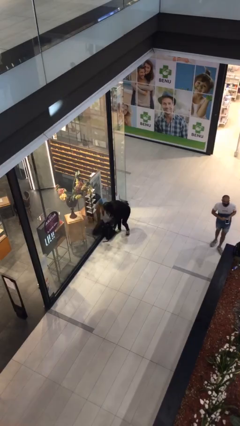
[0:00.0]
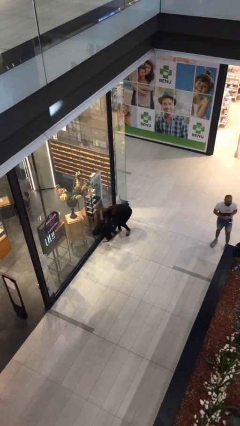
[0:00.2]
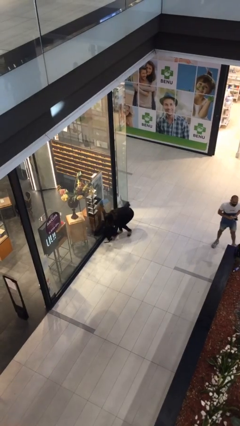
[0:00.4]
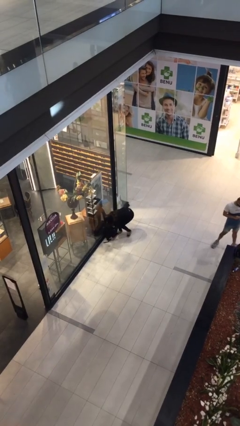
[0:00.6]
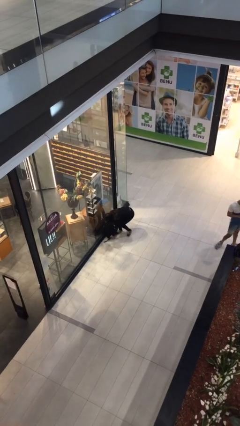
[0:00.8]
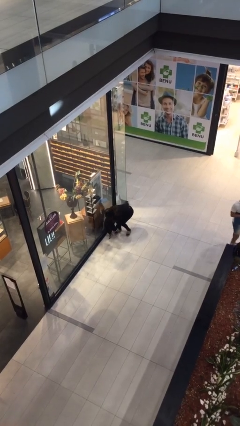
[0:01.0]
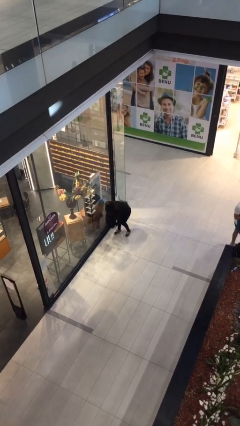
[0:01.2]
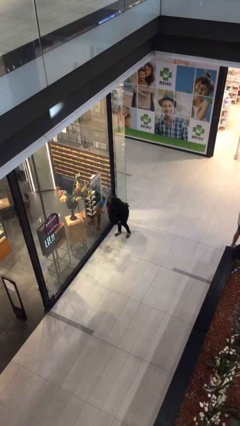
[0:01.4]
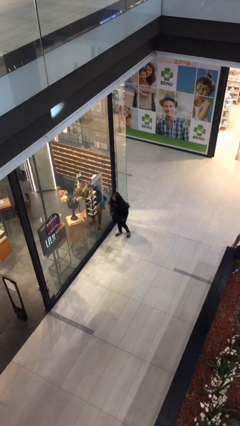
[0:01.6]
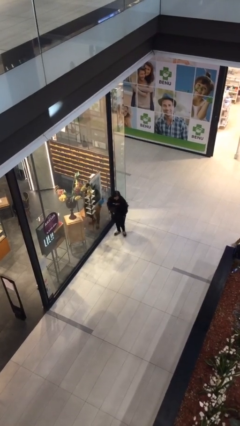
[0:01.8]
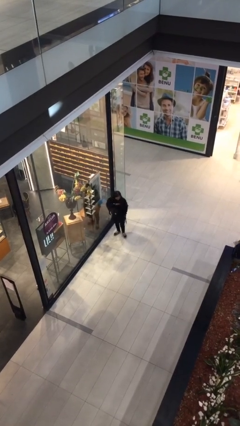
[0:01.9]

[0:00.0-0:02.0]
person picks up object from floor

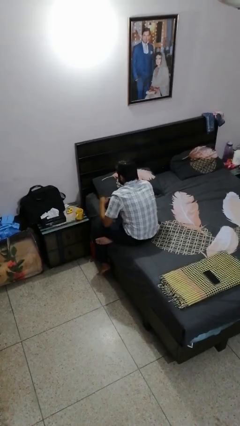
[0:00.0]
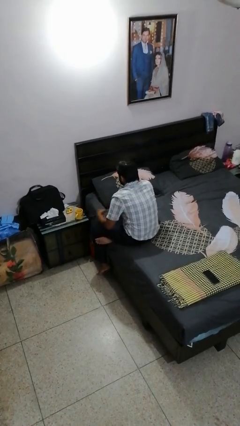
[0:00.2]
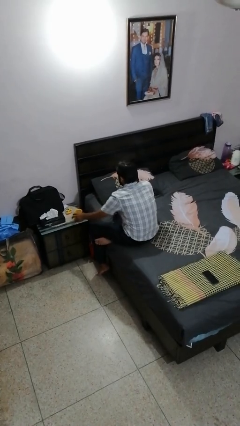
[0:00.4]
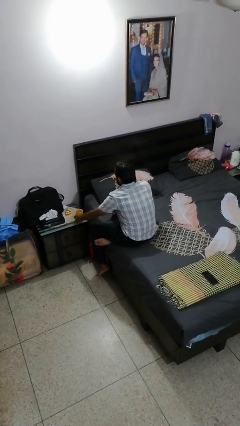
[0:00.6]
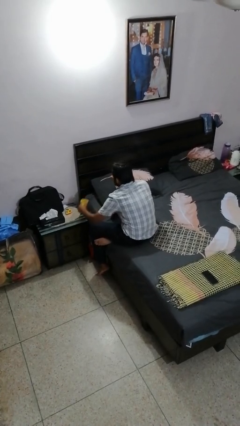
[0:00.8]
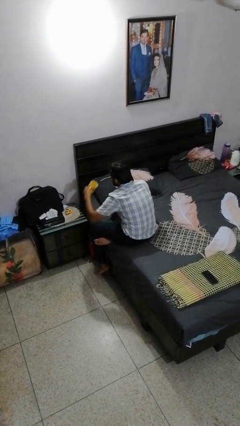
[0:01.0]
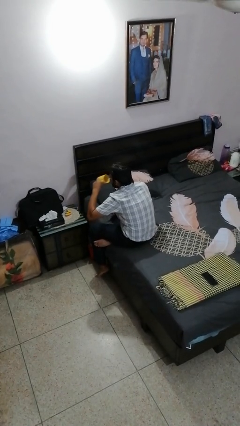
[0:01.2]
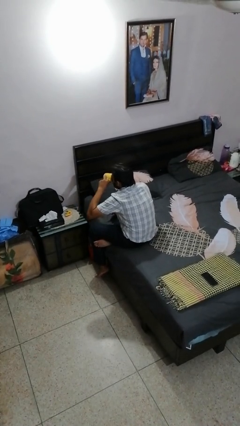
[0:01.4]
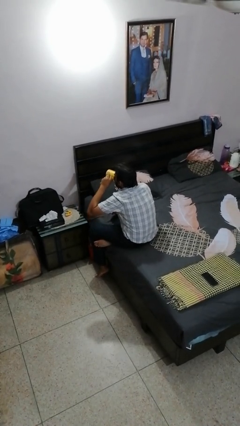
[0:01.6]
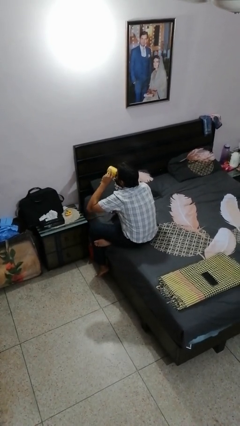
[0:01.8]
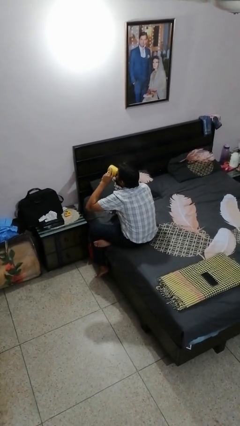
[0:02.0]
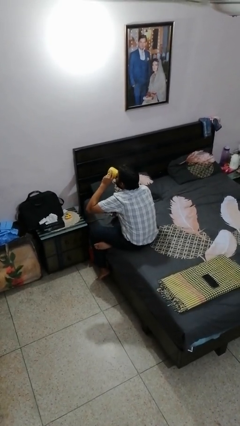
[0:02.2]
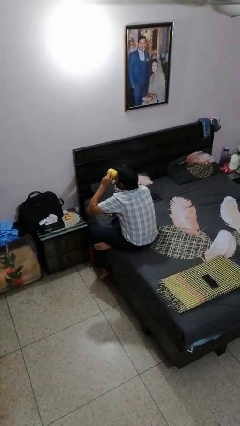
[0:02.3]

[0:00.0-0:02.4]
person drinks from mug

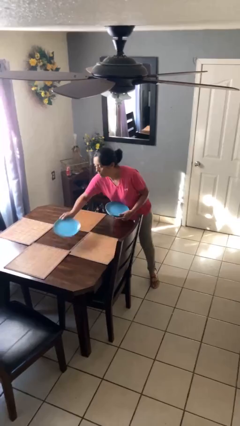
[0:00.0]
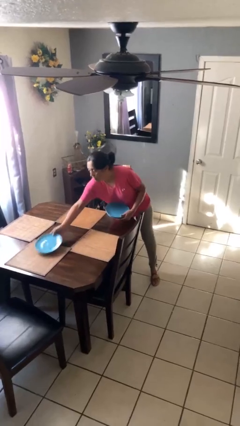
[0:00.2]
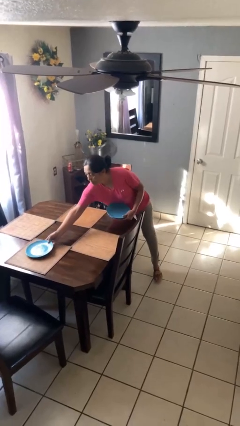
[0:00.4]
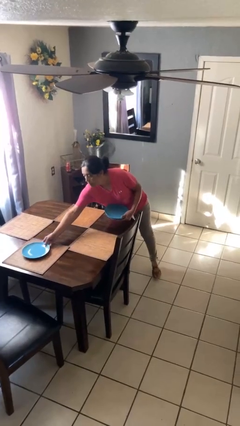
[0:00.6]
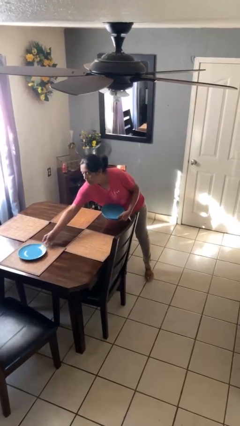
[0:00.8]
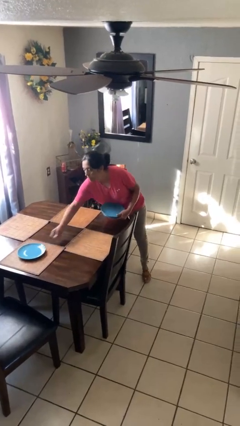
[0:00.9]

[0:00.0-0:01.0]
person sets table

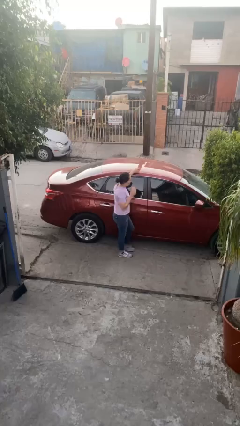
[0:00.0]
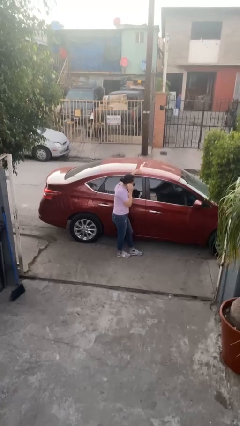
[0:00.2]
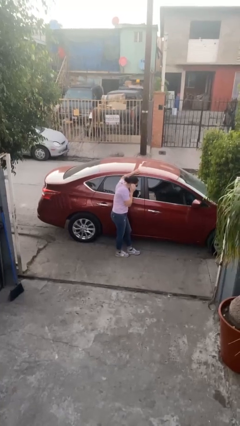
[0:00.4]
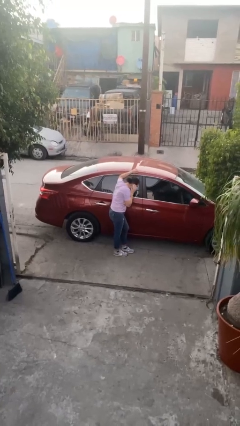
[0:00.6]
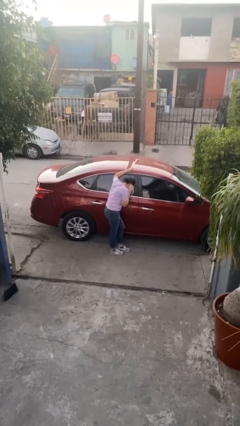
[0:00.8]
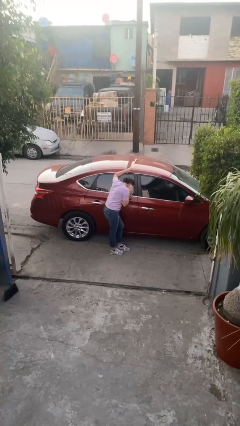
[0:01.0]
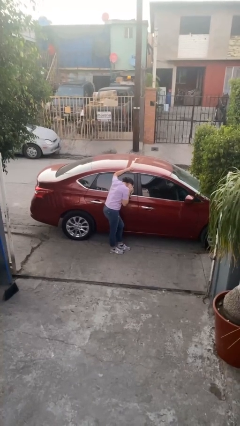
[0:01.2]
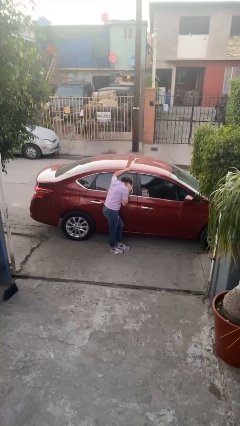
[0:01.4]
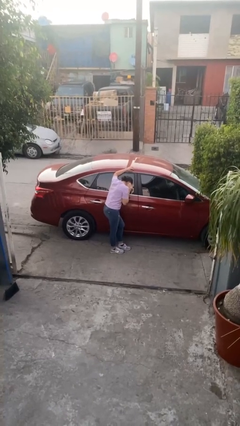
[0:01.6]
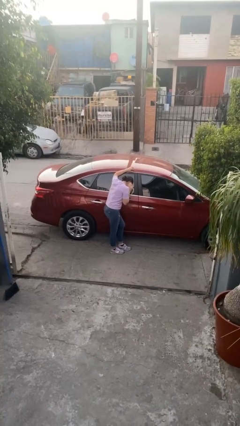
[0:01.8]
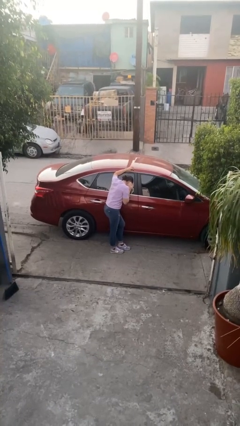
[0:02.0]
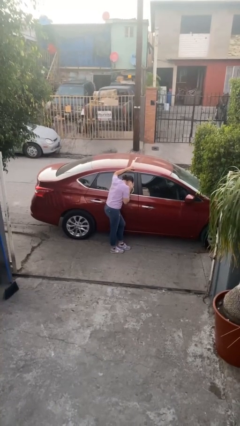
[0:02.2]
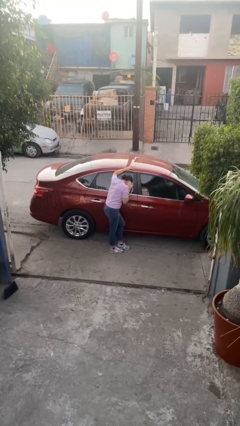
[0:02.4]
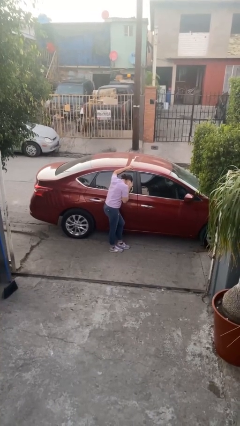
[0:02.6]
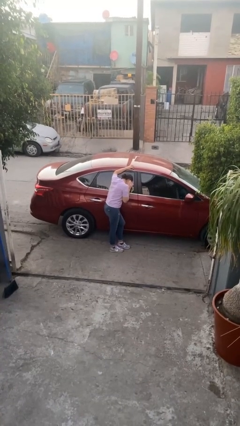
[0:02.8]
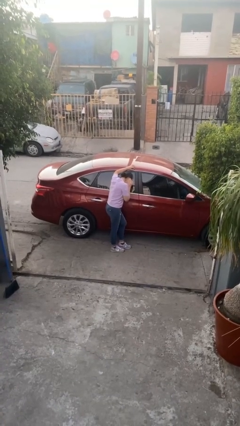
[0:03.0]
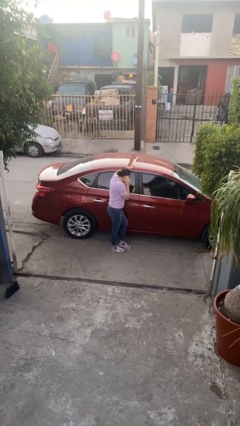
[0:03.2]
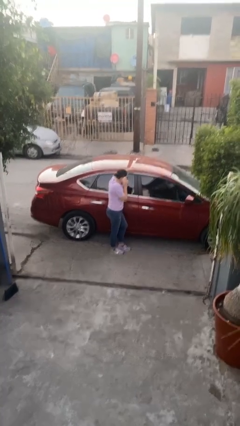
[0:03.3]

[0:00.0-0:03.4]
person leans against car

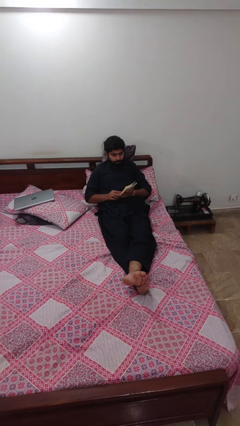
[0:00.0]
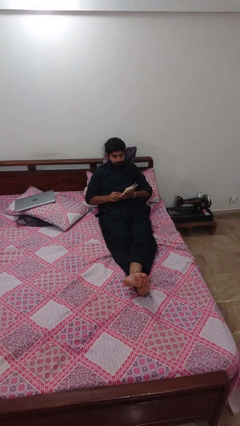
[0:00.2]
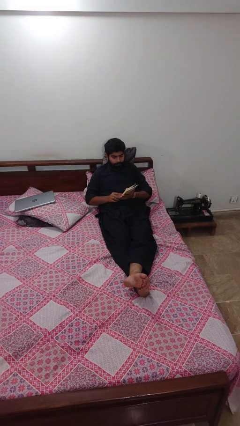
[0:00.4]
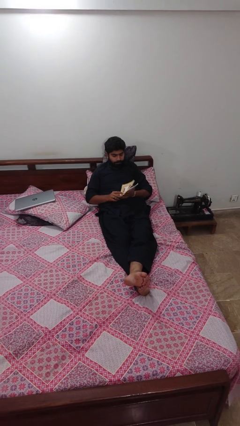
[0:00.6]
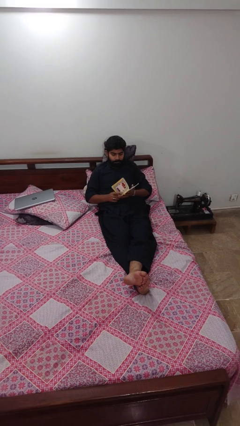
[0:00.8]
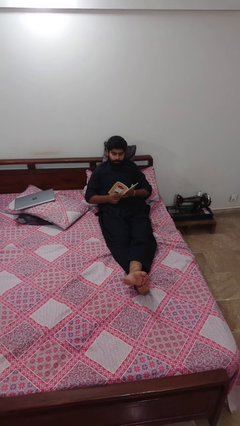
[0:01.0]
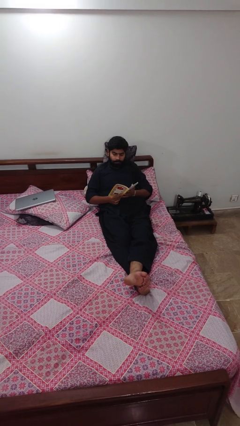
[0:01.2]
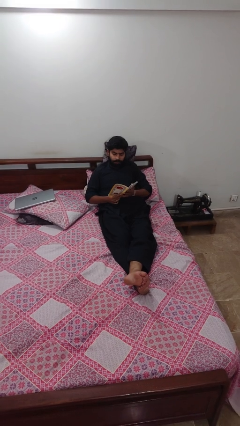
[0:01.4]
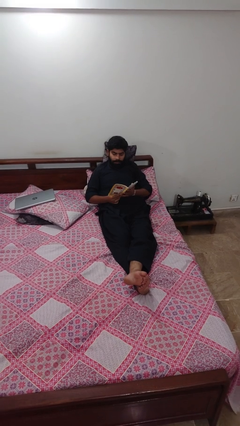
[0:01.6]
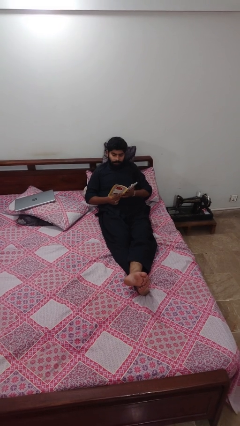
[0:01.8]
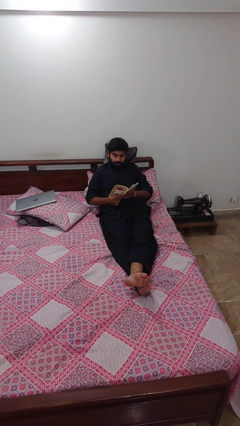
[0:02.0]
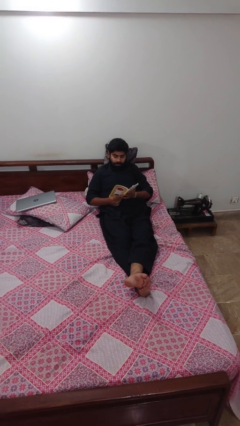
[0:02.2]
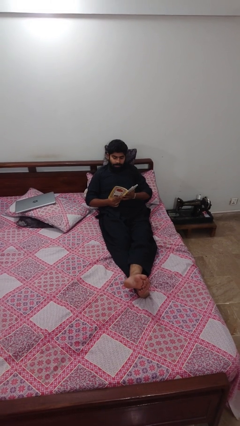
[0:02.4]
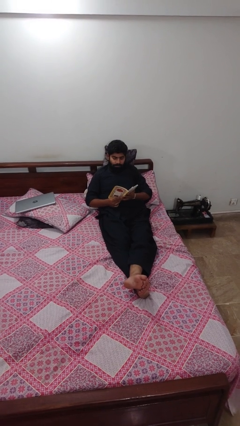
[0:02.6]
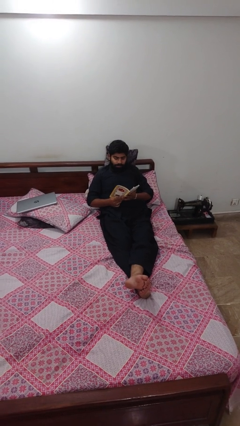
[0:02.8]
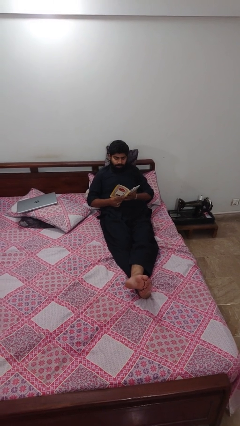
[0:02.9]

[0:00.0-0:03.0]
person reads book

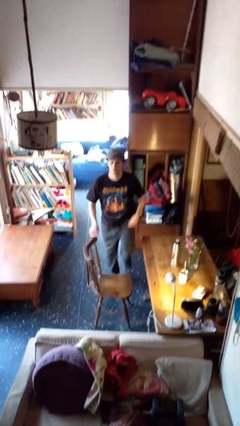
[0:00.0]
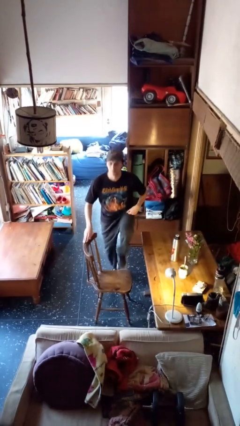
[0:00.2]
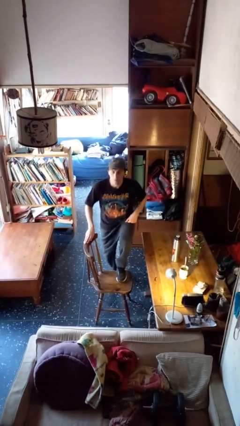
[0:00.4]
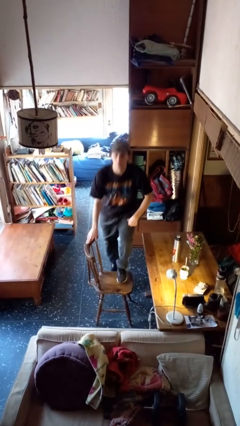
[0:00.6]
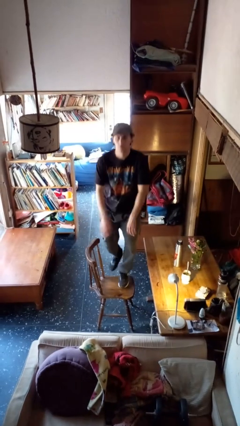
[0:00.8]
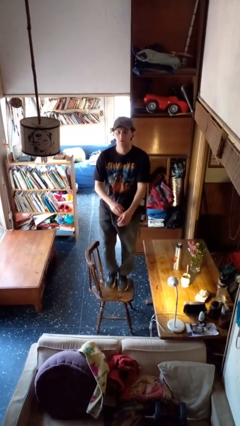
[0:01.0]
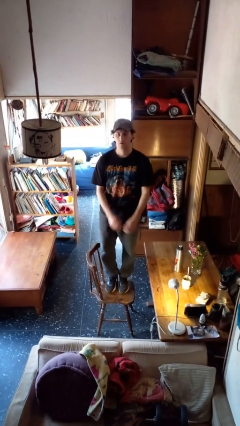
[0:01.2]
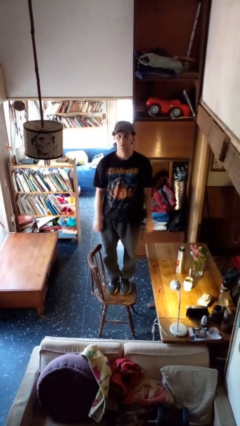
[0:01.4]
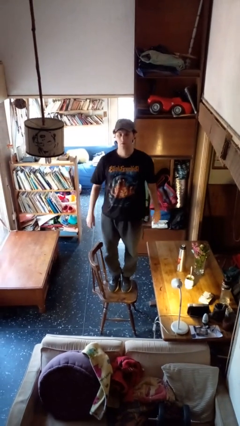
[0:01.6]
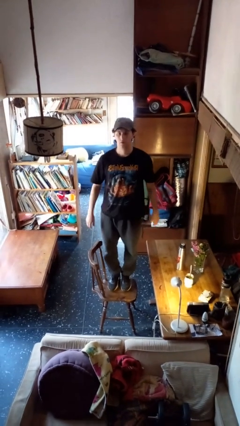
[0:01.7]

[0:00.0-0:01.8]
person climbs on chair

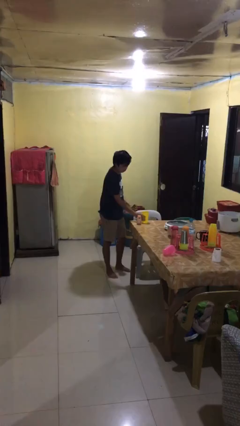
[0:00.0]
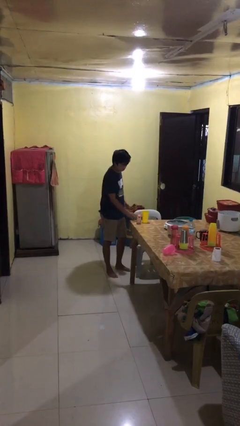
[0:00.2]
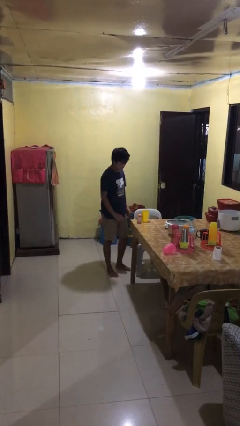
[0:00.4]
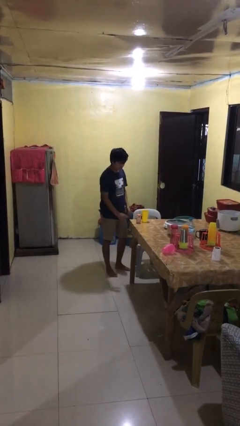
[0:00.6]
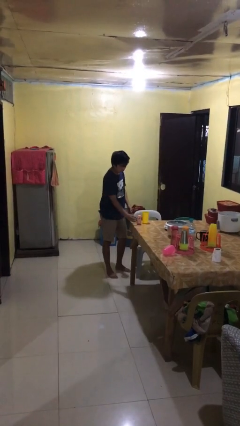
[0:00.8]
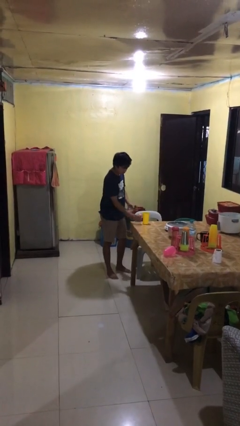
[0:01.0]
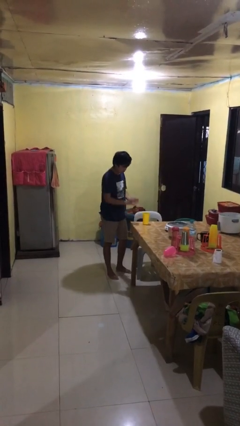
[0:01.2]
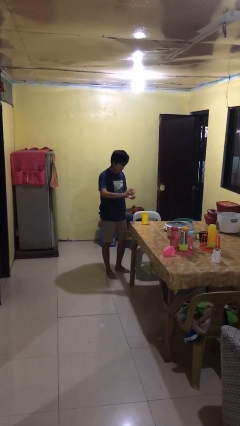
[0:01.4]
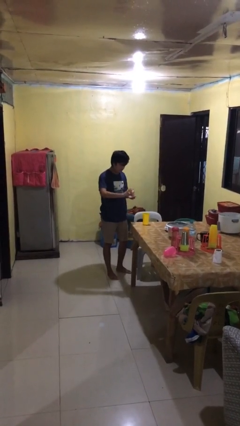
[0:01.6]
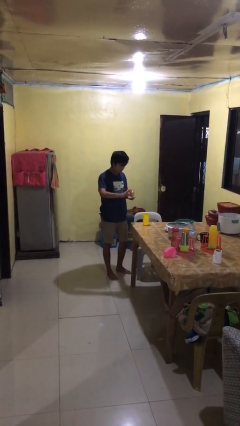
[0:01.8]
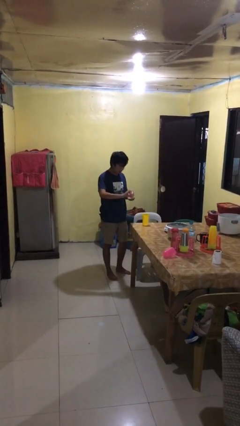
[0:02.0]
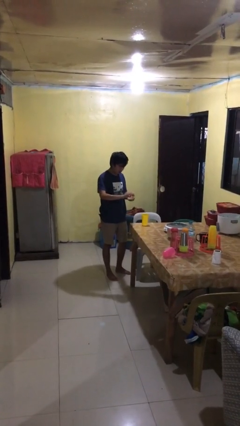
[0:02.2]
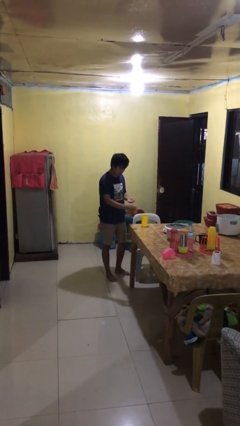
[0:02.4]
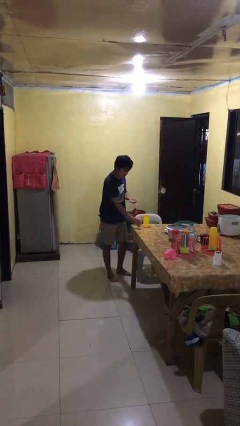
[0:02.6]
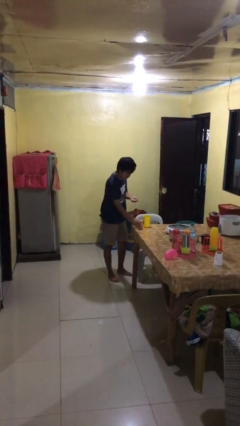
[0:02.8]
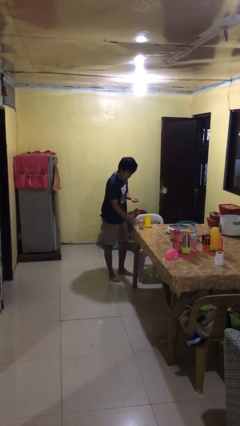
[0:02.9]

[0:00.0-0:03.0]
person takes medicine pills

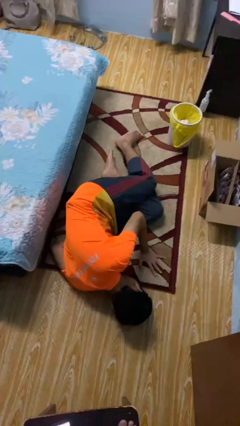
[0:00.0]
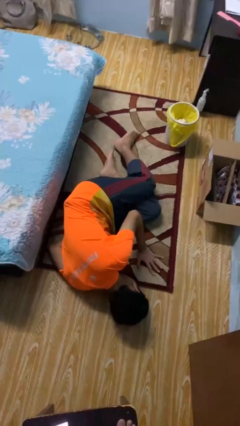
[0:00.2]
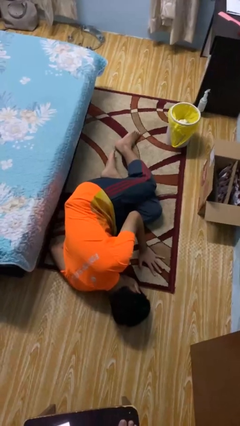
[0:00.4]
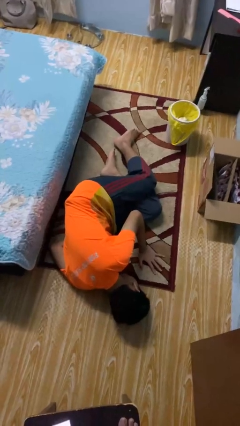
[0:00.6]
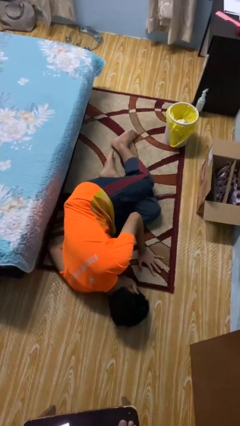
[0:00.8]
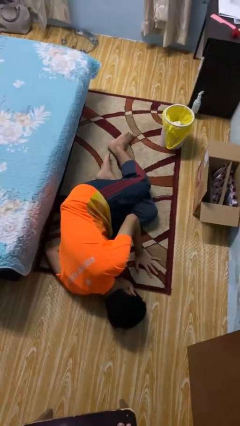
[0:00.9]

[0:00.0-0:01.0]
person lies down on floor
